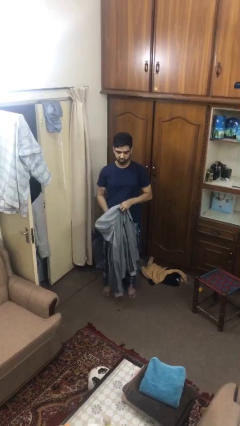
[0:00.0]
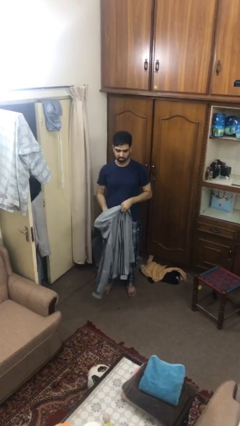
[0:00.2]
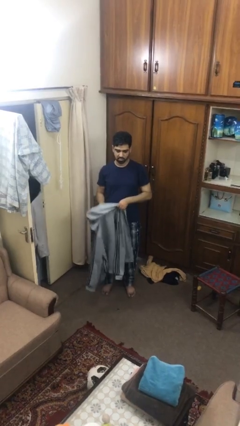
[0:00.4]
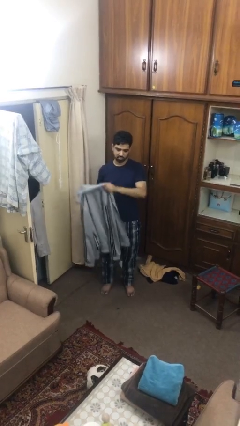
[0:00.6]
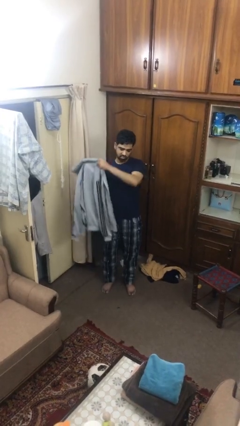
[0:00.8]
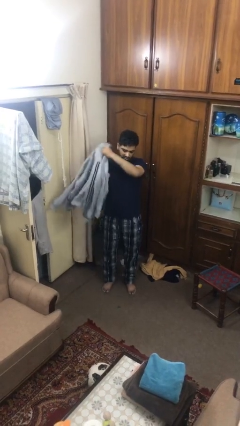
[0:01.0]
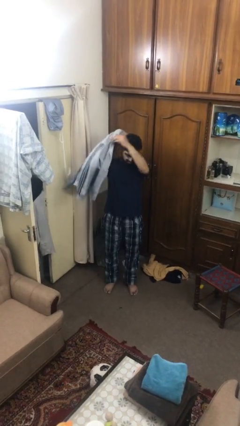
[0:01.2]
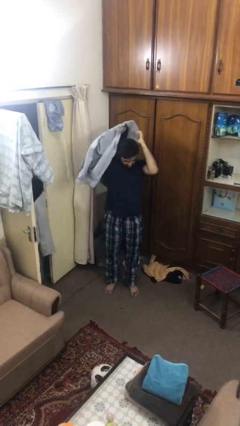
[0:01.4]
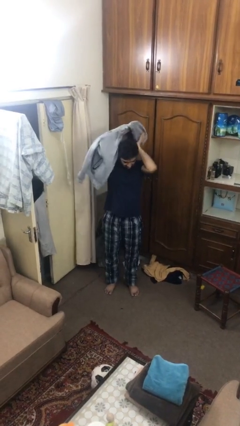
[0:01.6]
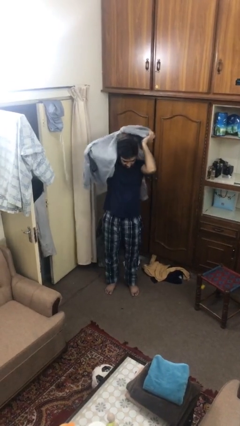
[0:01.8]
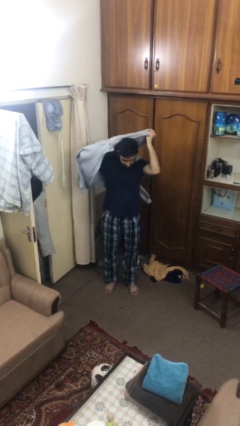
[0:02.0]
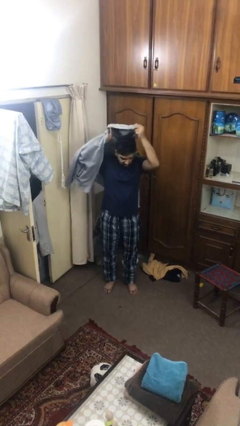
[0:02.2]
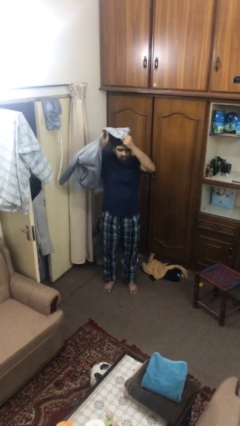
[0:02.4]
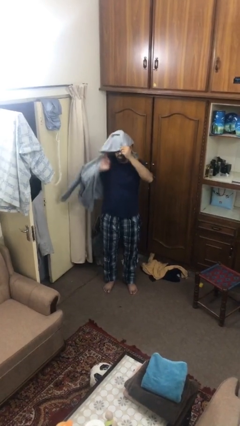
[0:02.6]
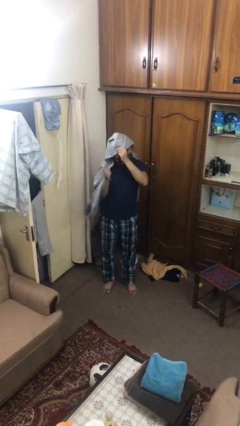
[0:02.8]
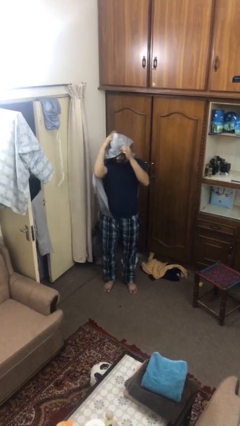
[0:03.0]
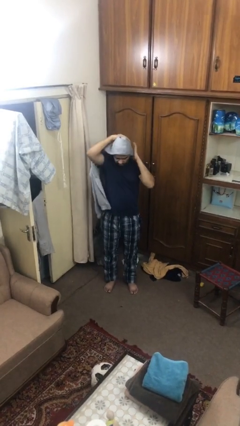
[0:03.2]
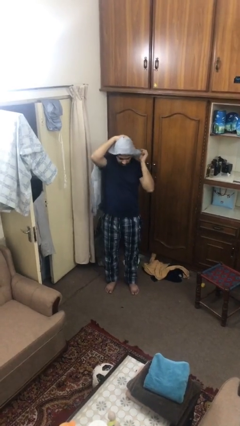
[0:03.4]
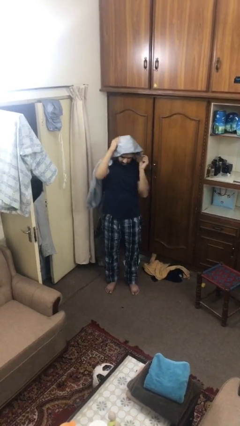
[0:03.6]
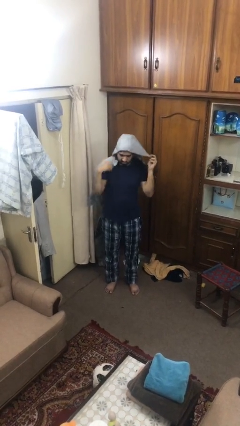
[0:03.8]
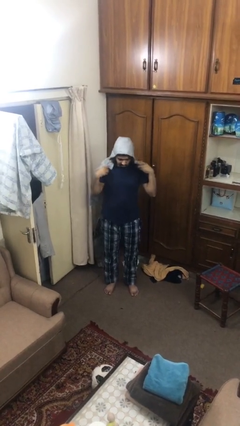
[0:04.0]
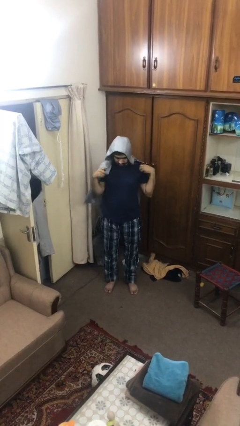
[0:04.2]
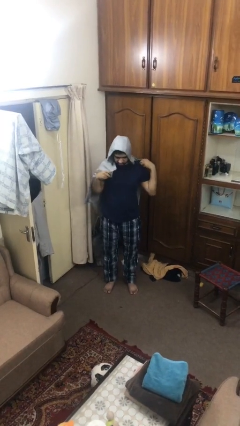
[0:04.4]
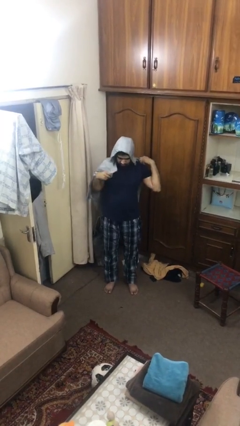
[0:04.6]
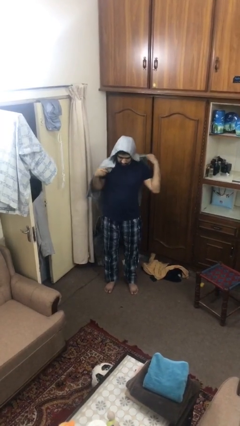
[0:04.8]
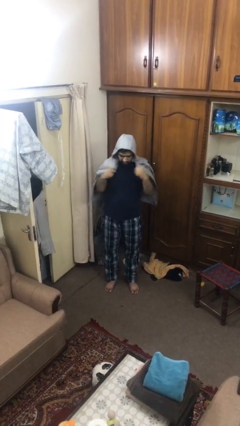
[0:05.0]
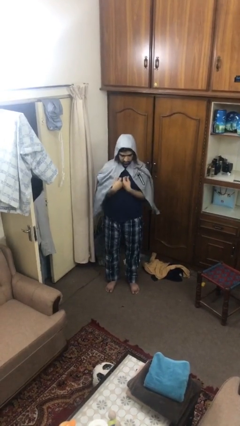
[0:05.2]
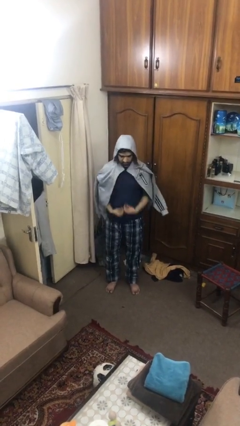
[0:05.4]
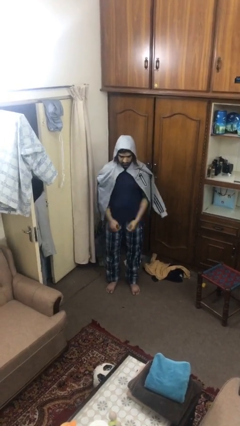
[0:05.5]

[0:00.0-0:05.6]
person puts on hoodie

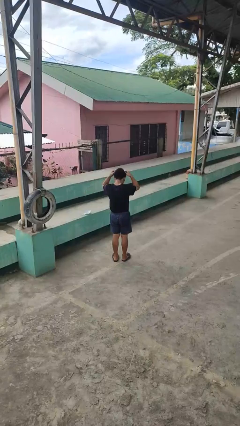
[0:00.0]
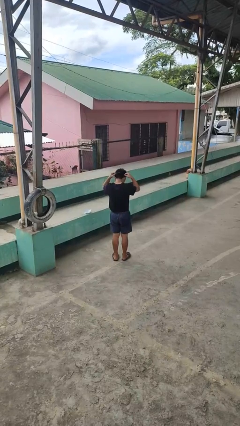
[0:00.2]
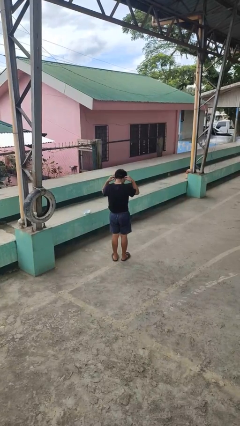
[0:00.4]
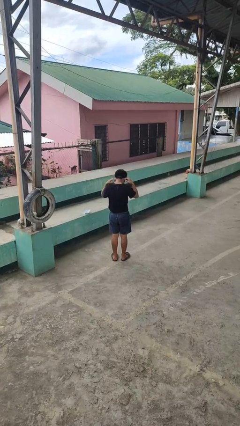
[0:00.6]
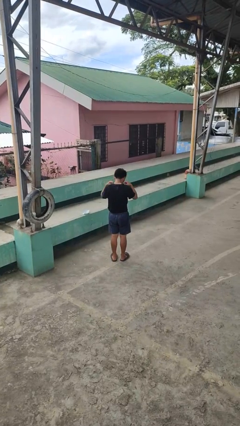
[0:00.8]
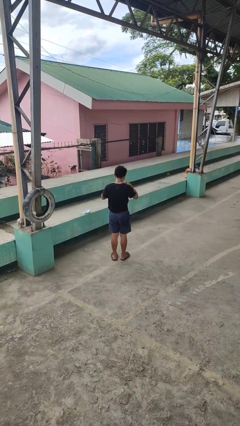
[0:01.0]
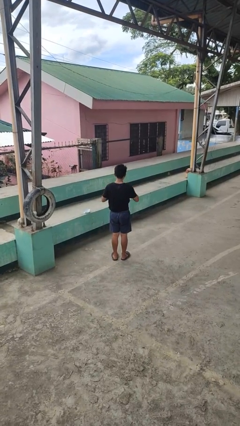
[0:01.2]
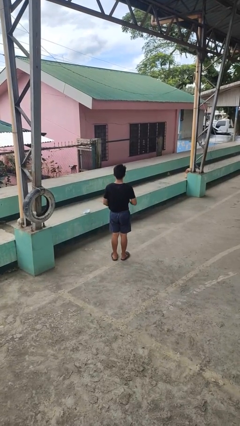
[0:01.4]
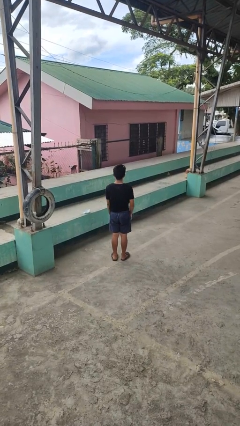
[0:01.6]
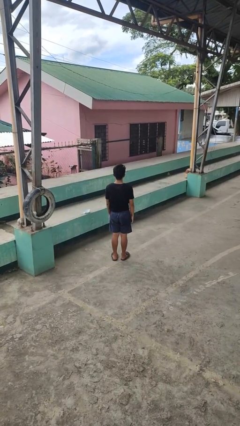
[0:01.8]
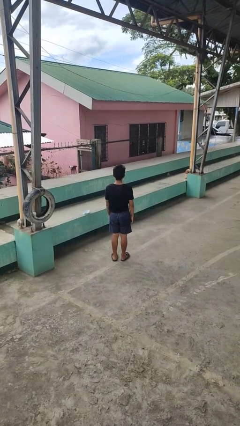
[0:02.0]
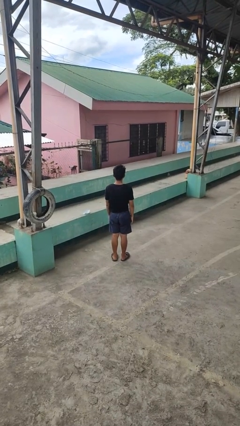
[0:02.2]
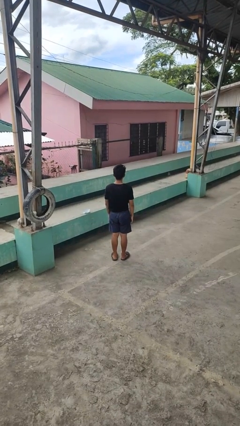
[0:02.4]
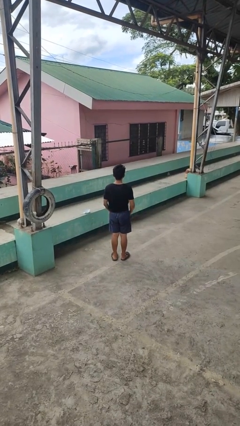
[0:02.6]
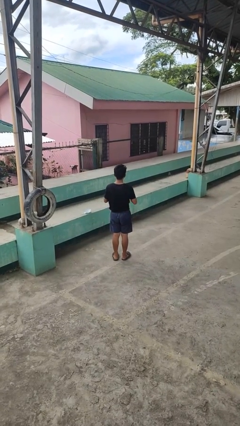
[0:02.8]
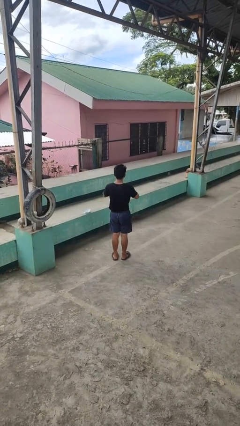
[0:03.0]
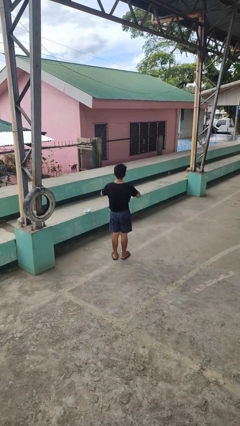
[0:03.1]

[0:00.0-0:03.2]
person puts on necklace

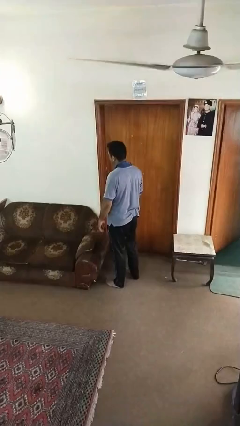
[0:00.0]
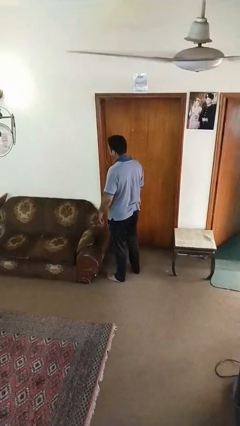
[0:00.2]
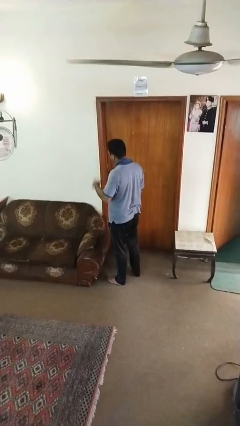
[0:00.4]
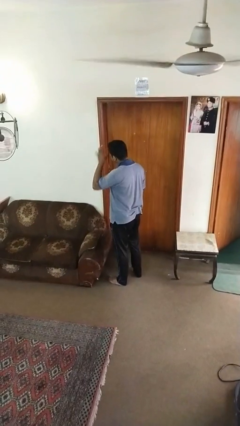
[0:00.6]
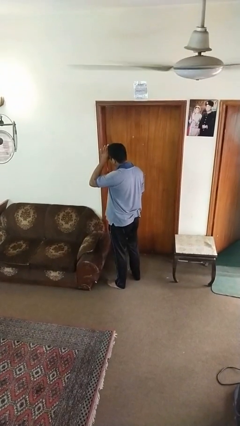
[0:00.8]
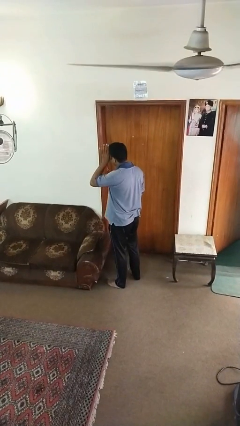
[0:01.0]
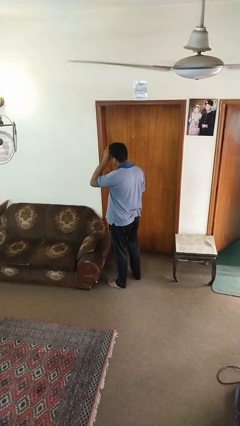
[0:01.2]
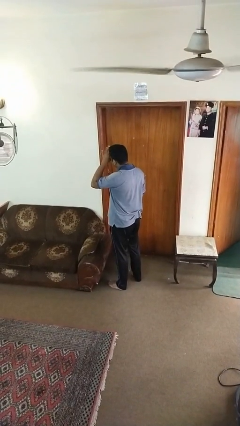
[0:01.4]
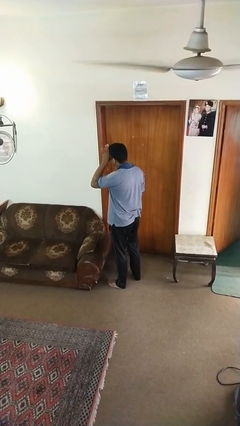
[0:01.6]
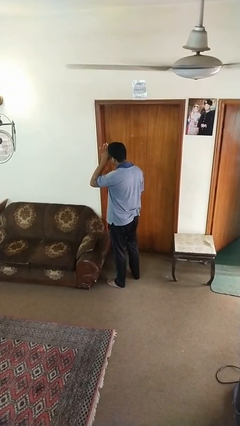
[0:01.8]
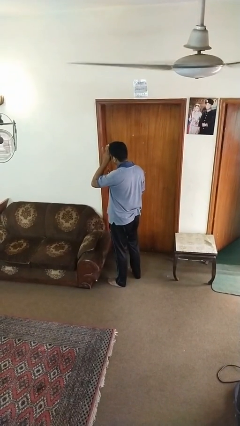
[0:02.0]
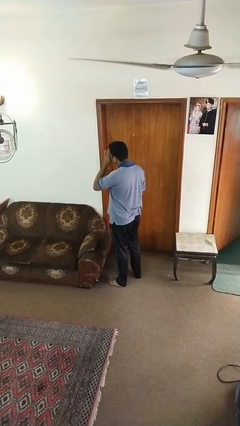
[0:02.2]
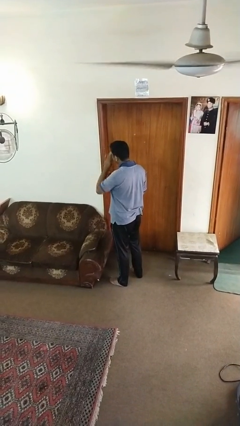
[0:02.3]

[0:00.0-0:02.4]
person rubs eyes

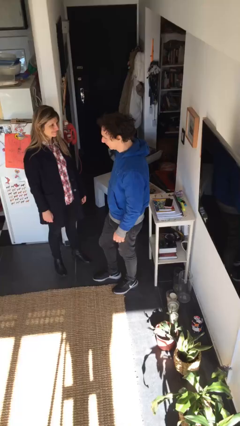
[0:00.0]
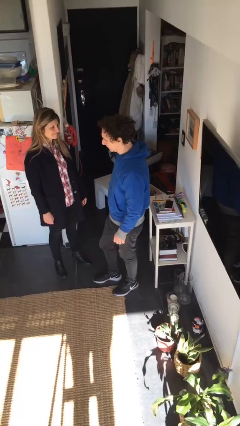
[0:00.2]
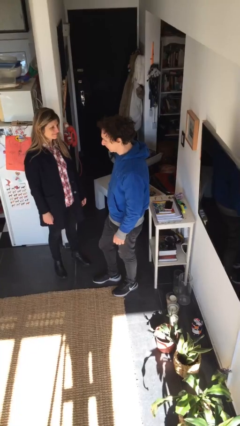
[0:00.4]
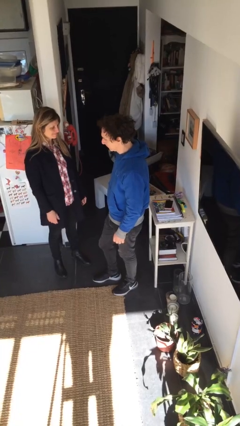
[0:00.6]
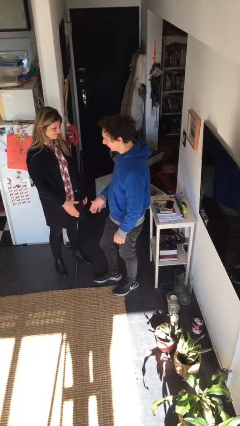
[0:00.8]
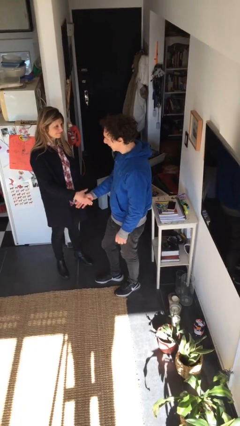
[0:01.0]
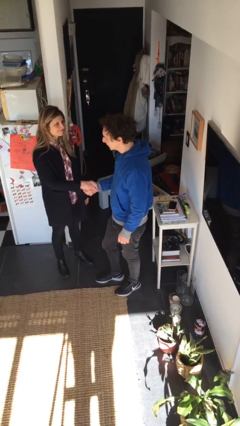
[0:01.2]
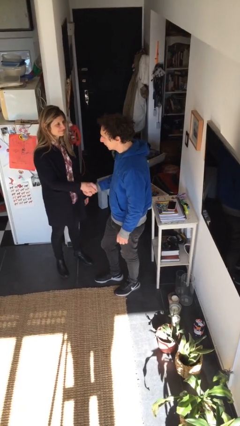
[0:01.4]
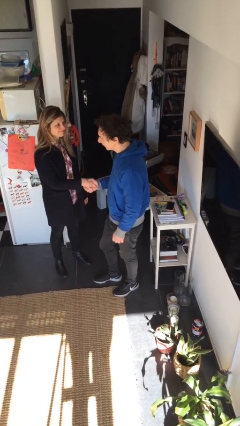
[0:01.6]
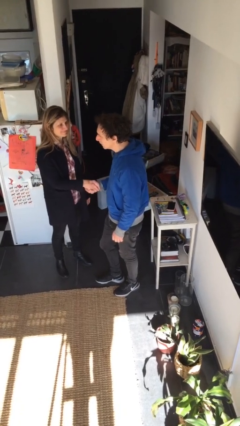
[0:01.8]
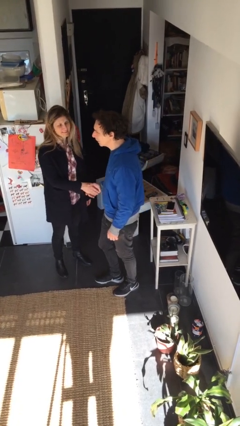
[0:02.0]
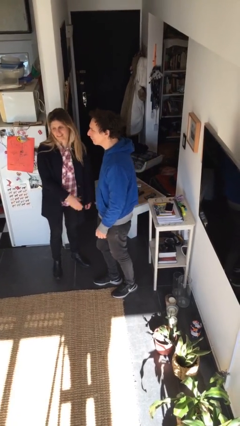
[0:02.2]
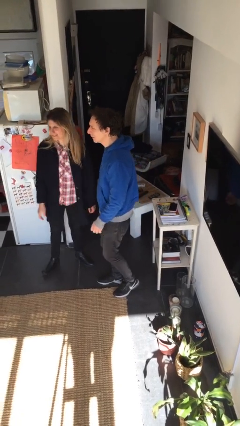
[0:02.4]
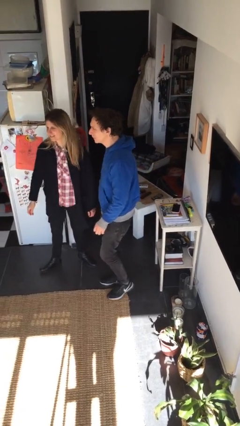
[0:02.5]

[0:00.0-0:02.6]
person shakes hand

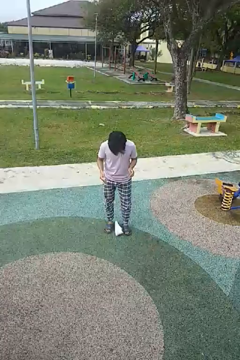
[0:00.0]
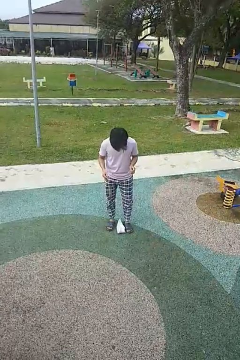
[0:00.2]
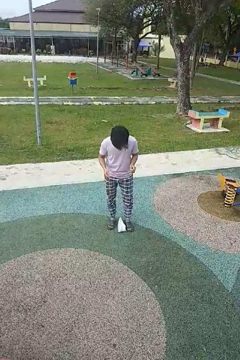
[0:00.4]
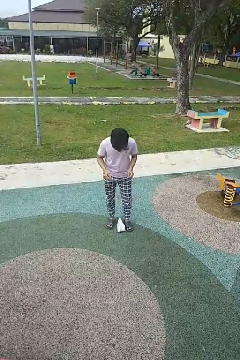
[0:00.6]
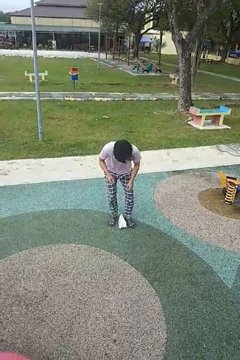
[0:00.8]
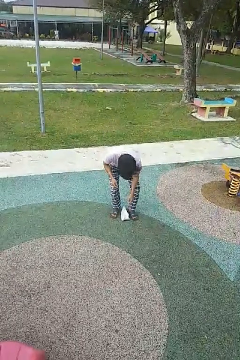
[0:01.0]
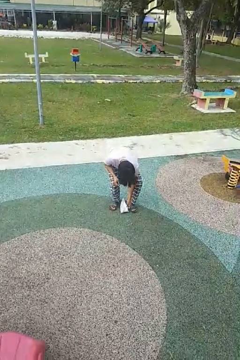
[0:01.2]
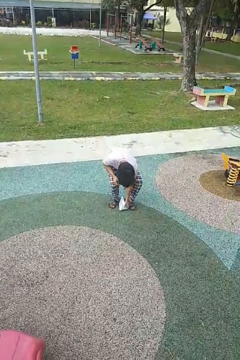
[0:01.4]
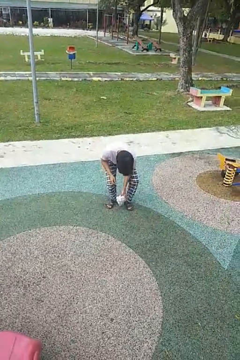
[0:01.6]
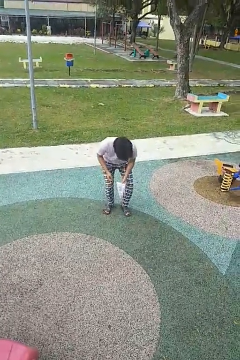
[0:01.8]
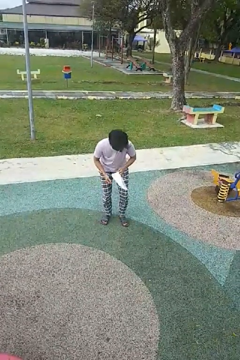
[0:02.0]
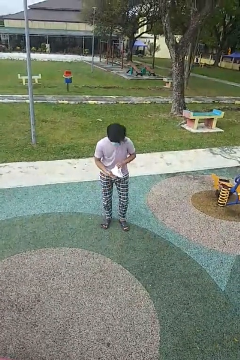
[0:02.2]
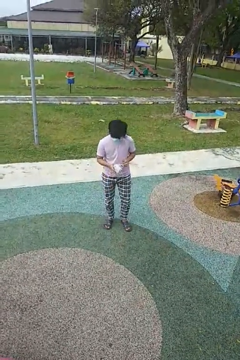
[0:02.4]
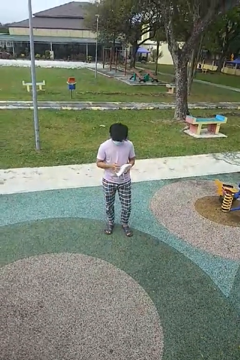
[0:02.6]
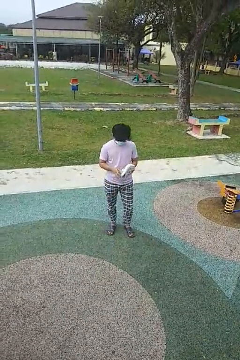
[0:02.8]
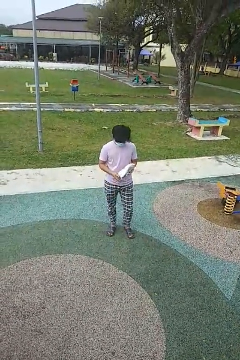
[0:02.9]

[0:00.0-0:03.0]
person picks up object from floor

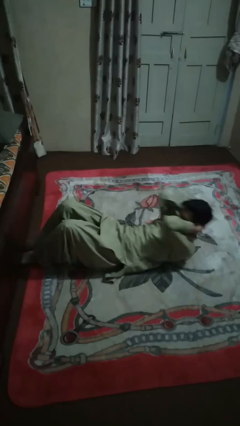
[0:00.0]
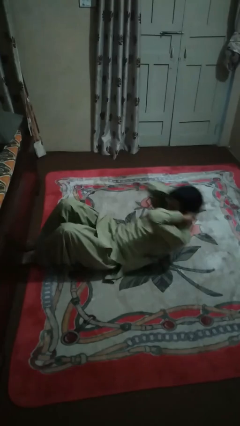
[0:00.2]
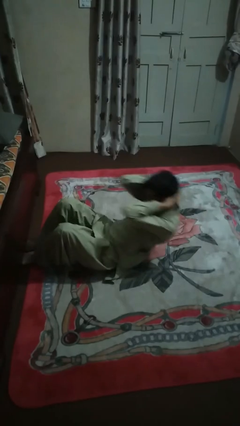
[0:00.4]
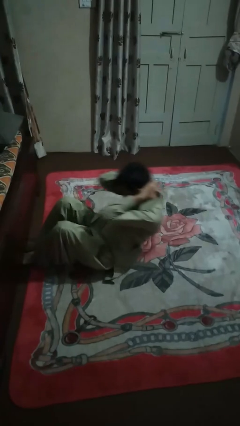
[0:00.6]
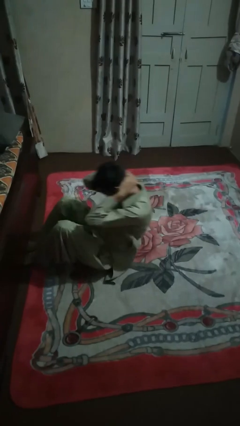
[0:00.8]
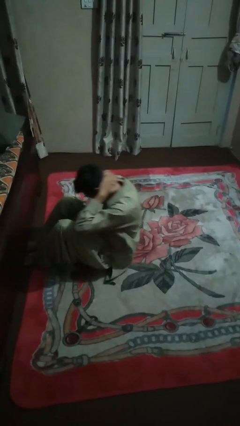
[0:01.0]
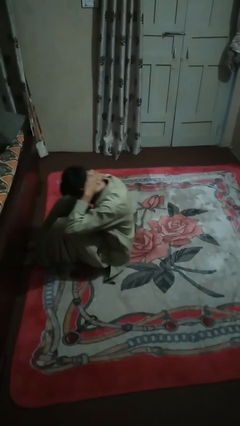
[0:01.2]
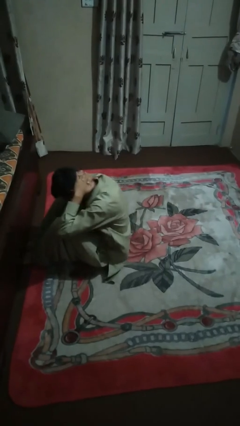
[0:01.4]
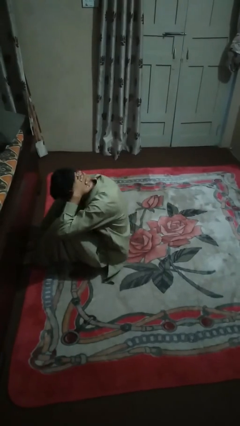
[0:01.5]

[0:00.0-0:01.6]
person exercises with situp
